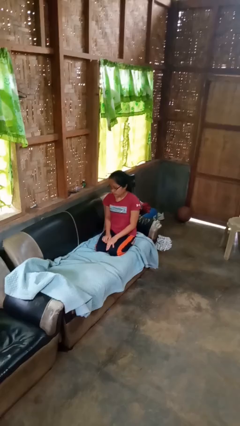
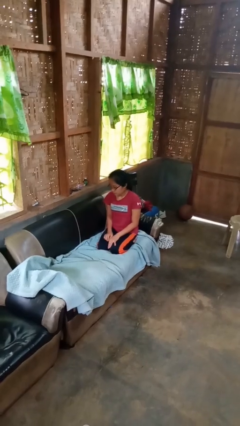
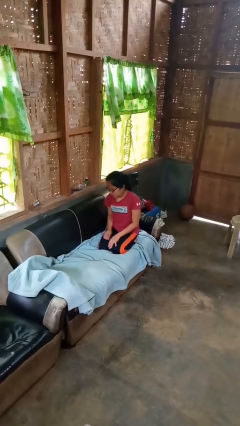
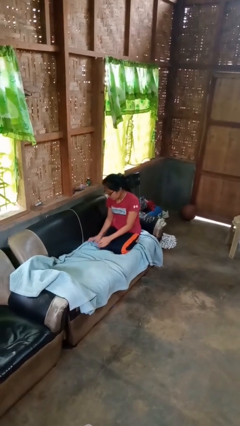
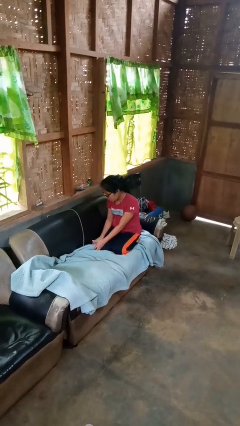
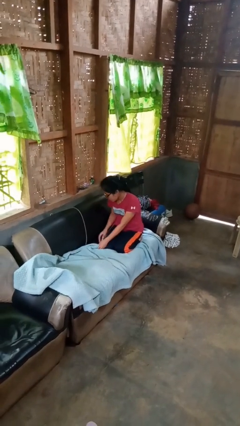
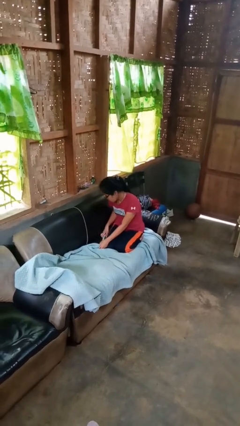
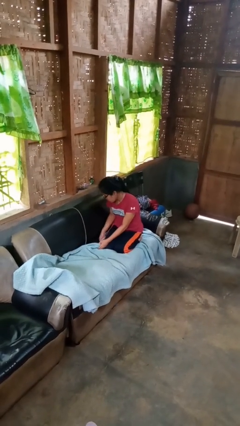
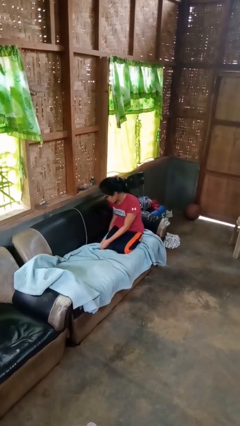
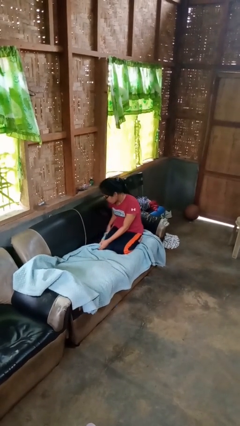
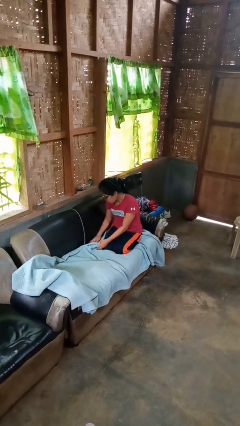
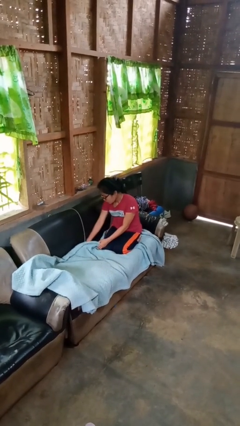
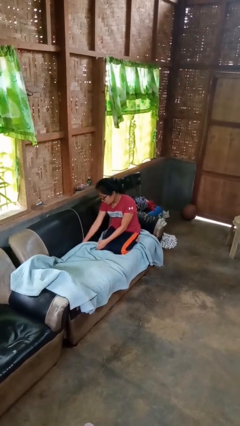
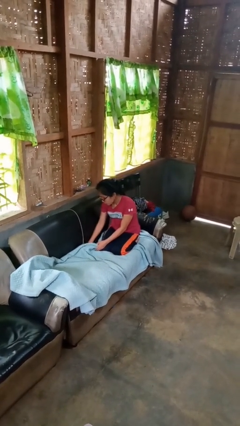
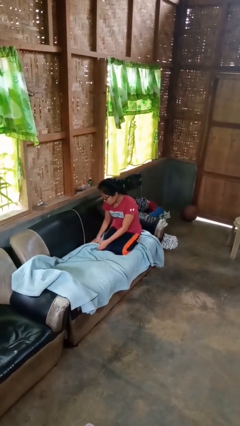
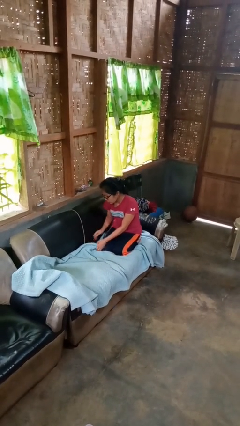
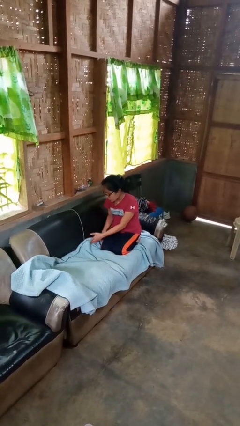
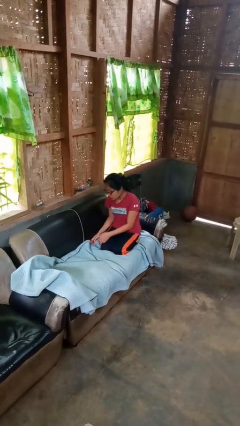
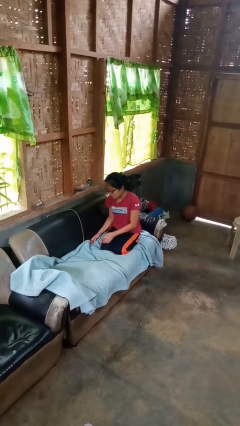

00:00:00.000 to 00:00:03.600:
person searches in couch

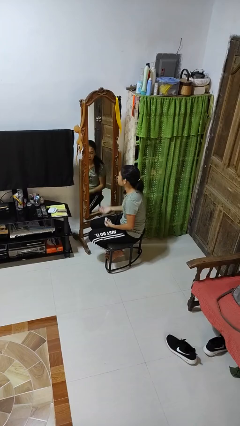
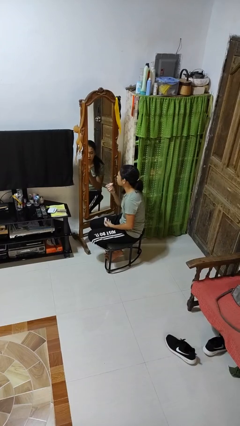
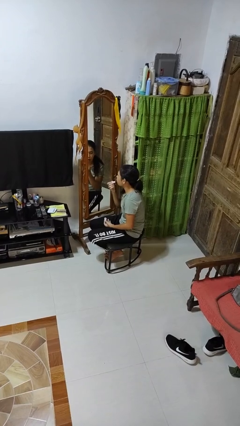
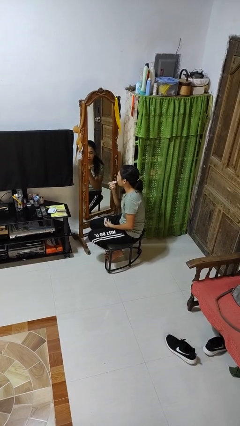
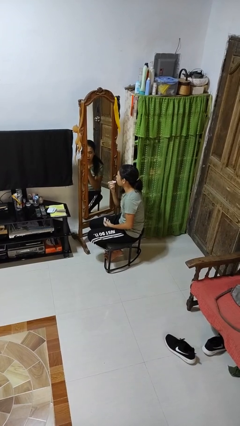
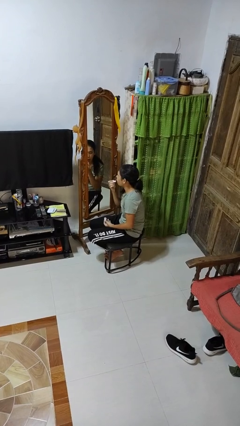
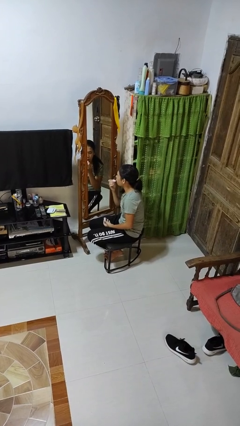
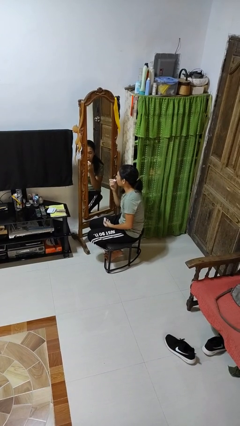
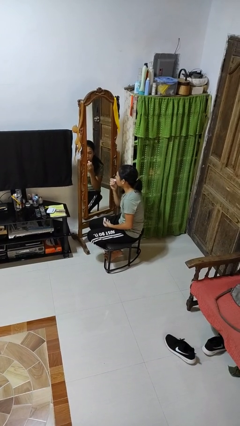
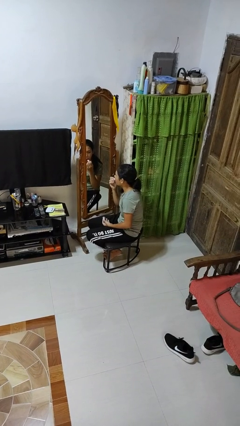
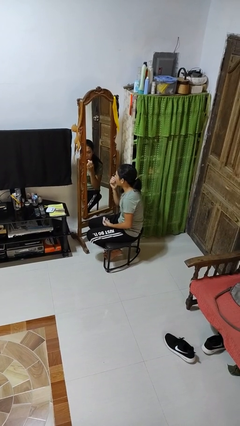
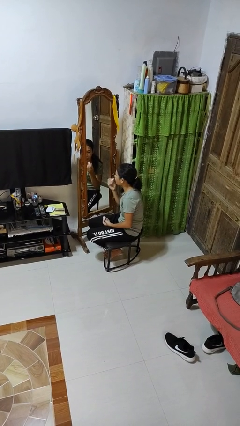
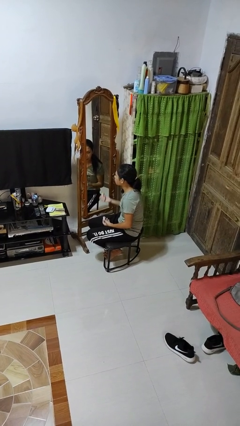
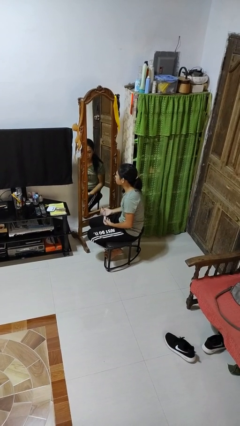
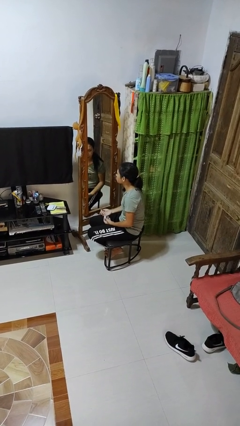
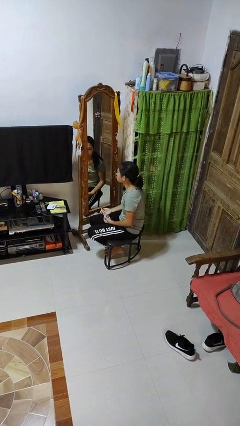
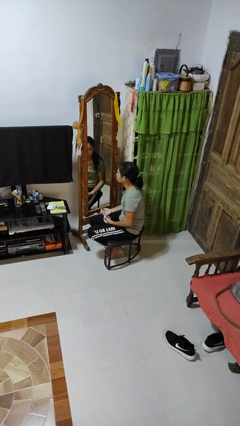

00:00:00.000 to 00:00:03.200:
person applies lip makeup

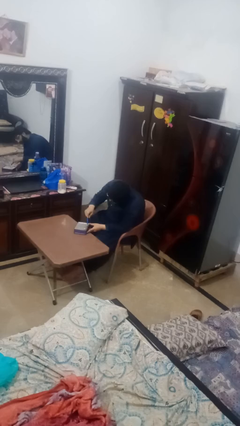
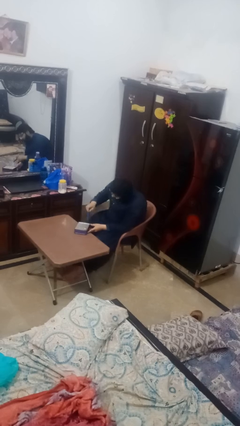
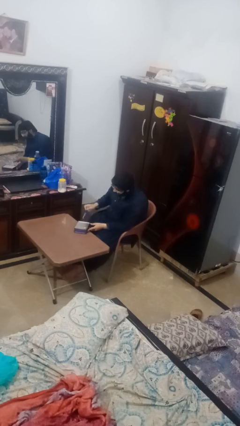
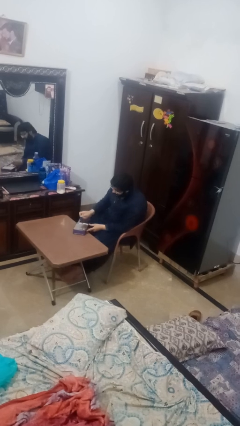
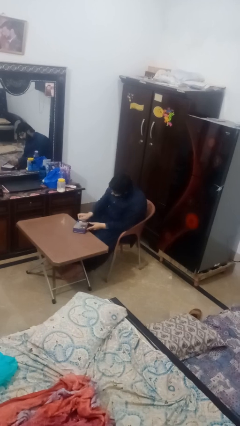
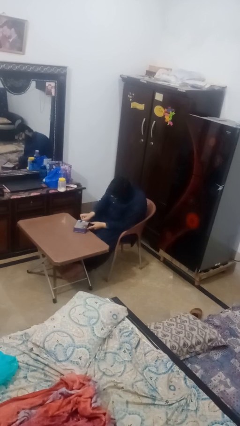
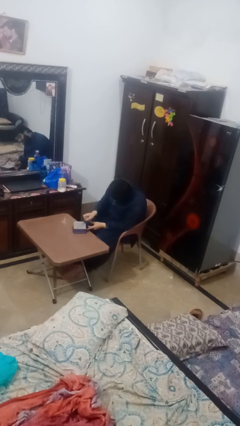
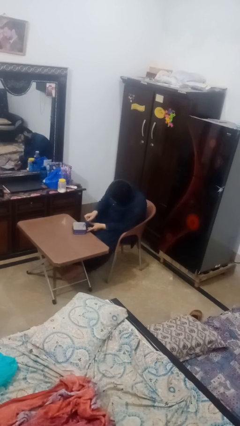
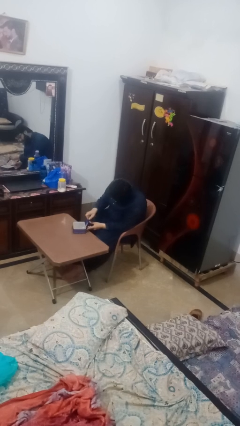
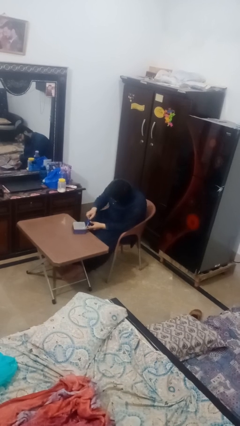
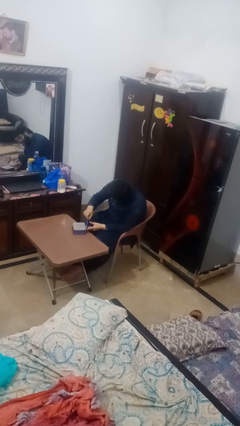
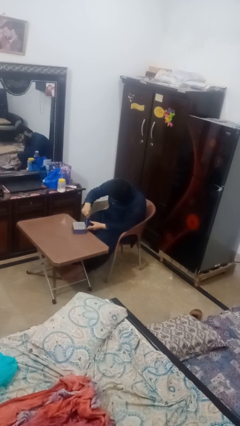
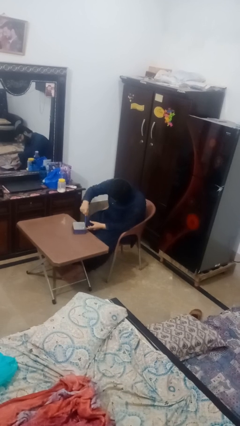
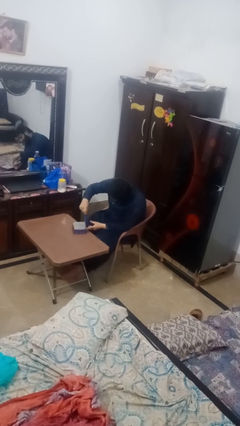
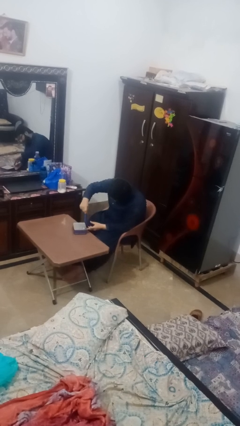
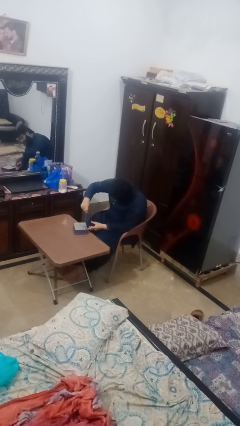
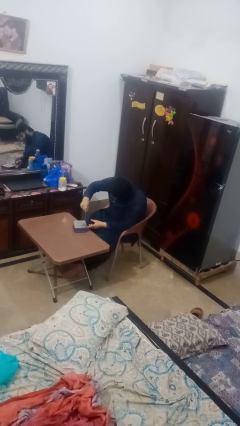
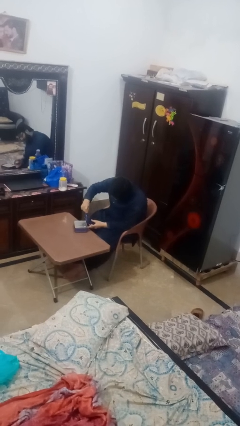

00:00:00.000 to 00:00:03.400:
person opens can with can opener

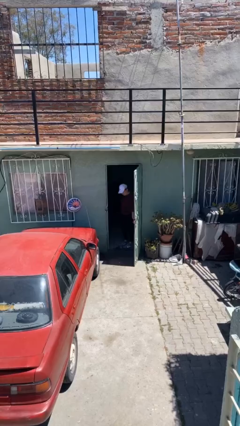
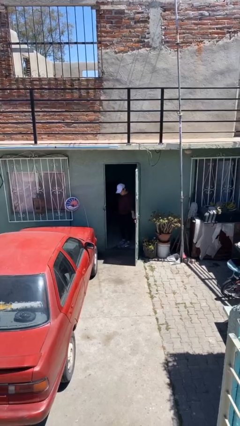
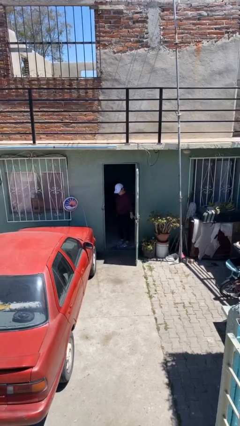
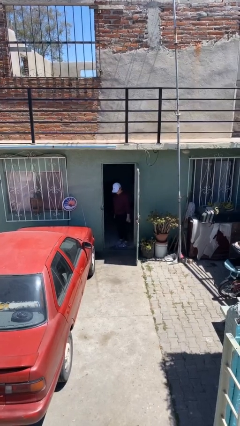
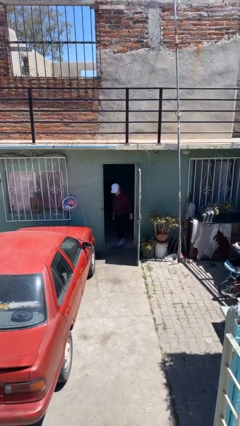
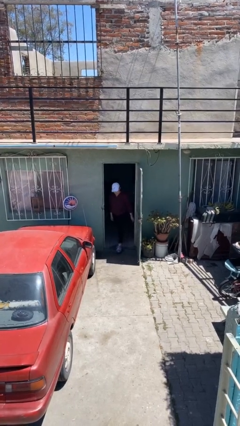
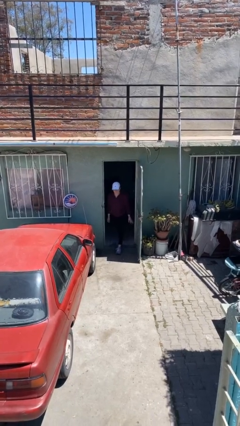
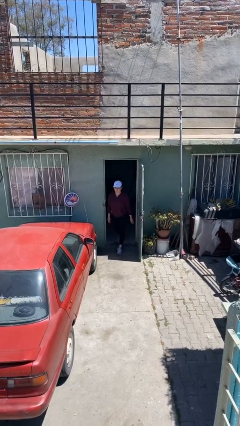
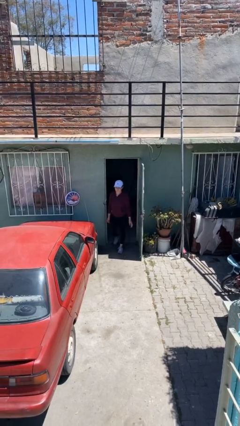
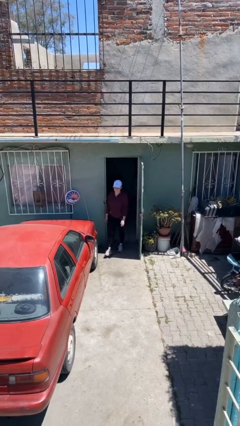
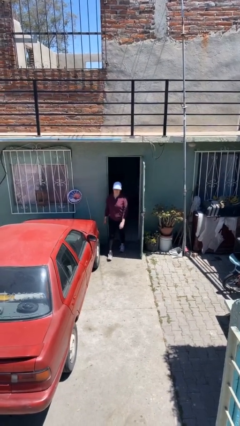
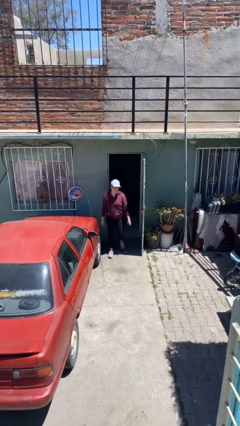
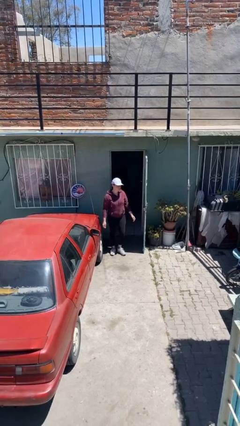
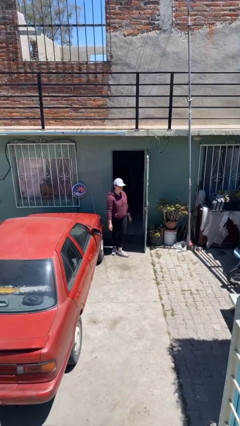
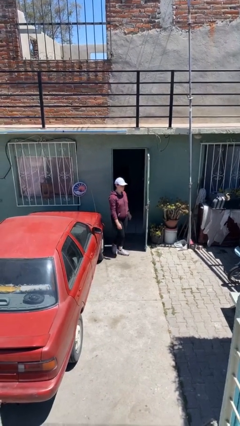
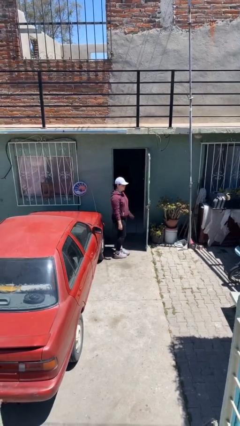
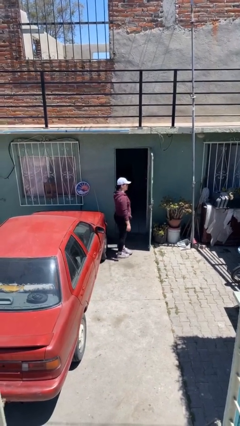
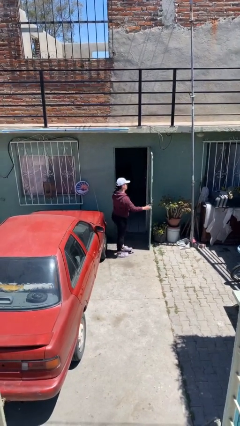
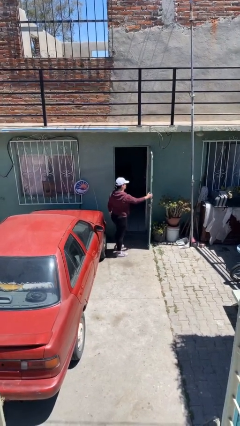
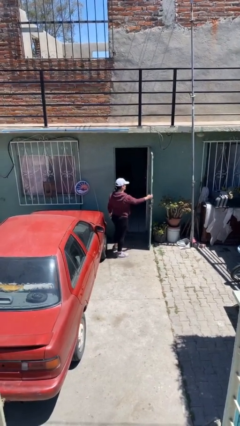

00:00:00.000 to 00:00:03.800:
person enters scene through structure

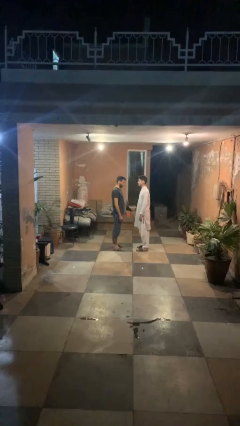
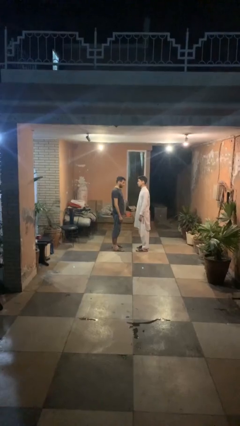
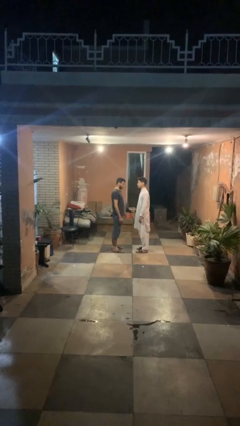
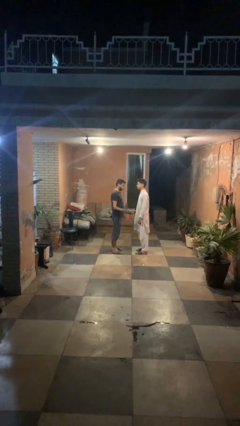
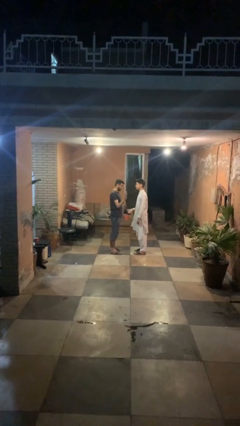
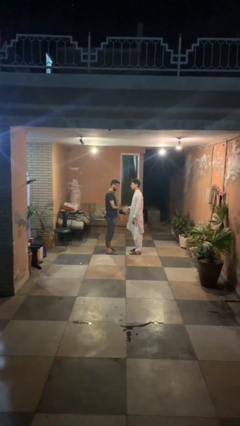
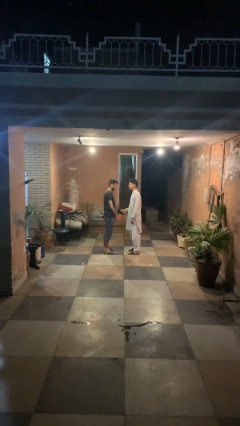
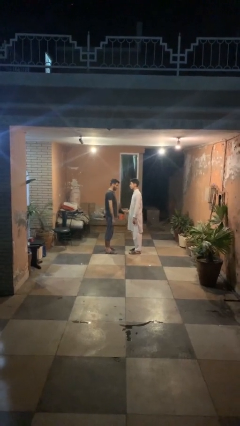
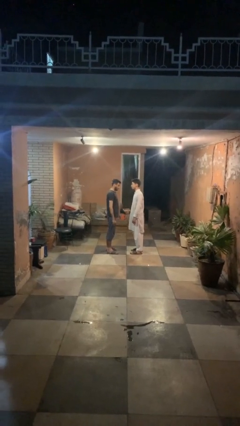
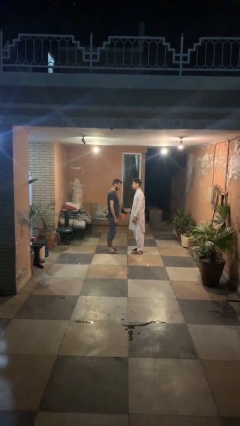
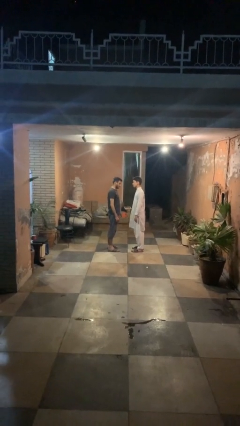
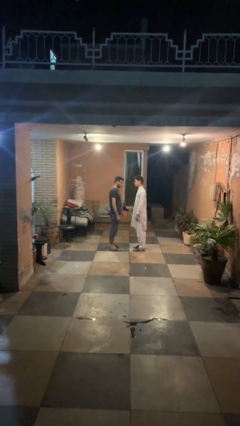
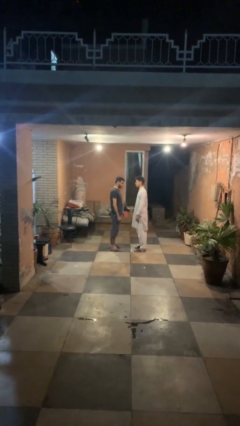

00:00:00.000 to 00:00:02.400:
person highfives hand

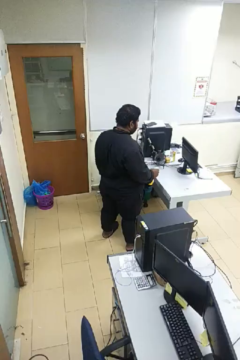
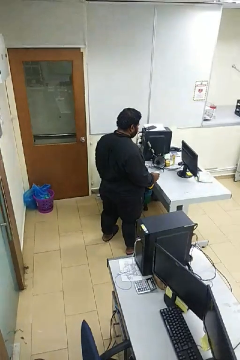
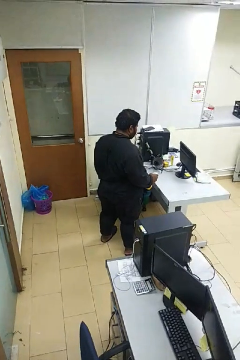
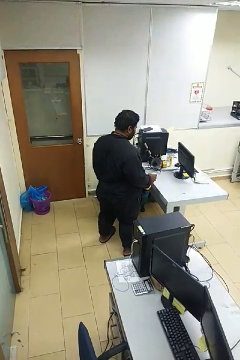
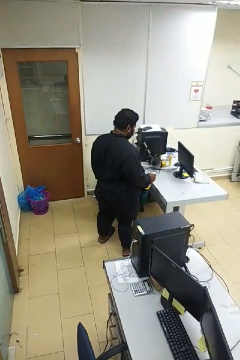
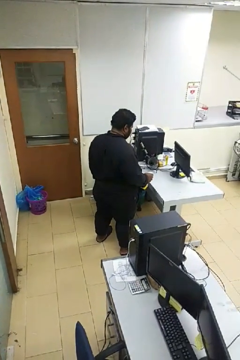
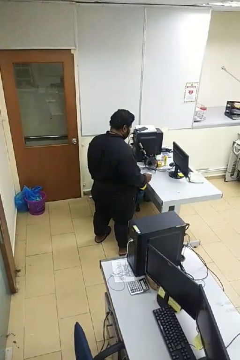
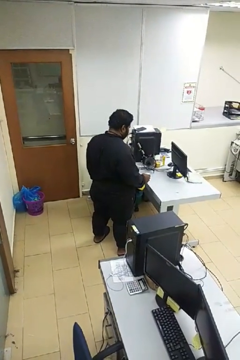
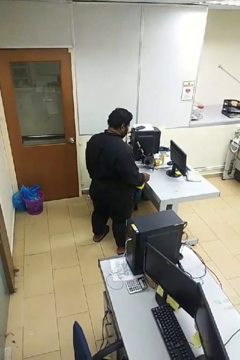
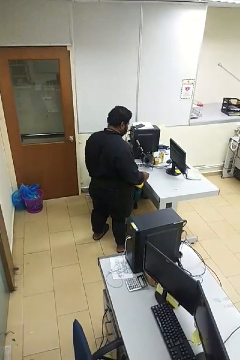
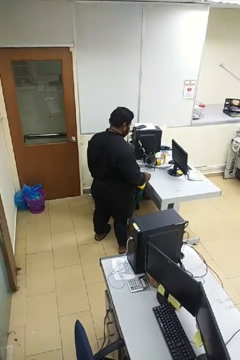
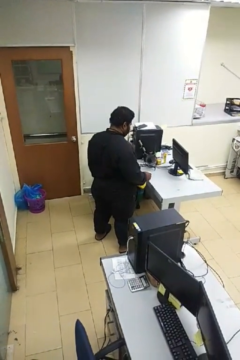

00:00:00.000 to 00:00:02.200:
person sprays from bottle
